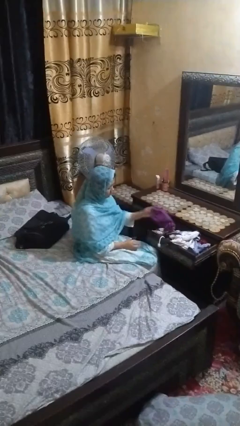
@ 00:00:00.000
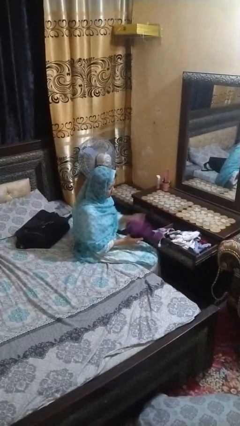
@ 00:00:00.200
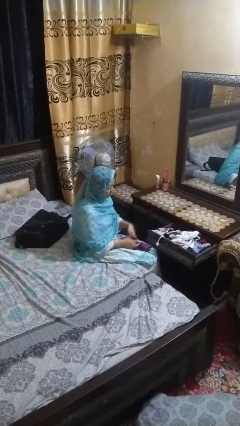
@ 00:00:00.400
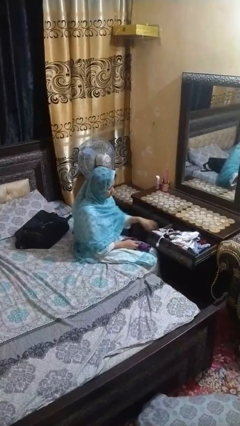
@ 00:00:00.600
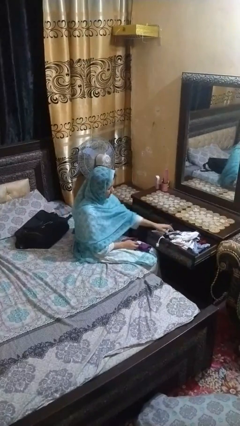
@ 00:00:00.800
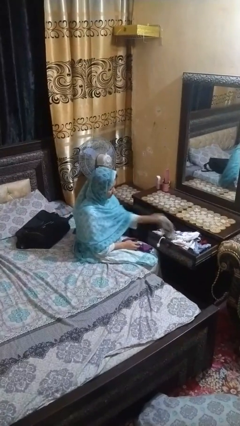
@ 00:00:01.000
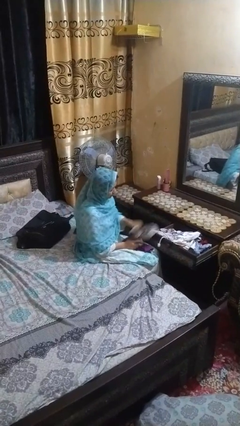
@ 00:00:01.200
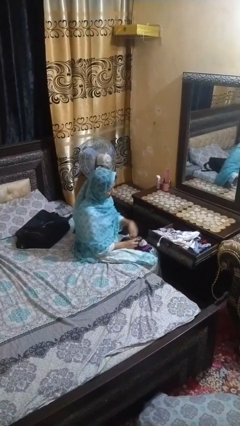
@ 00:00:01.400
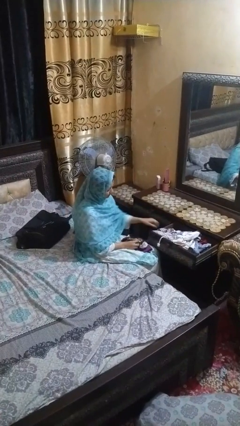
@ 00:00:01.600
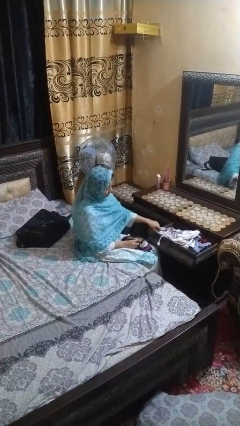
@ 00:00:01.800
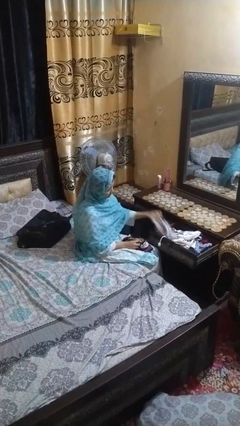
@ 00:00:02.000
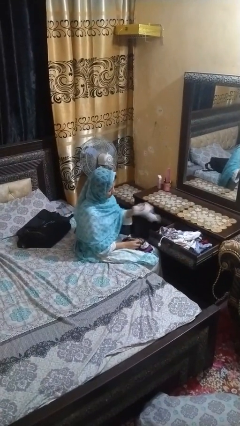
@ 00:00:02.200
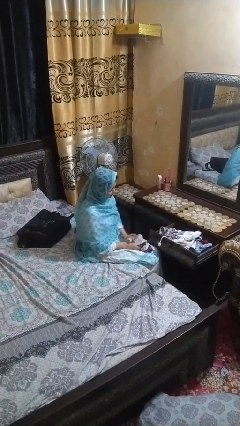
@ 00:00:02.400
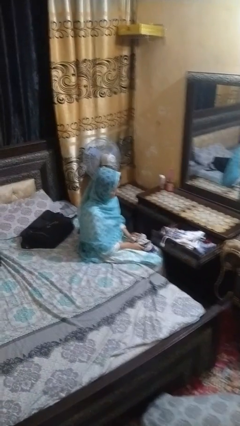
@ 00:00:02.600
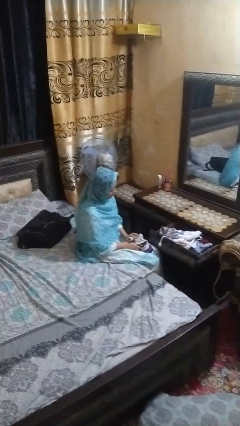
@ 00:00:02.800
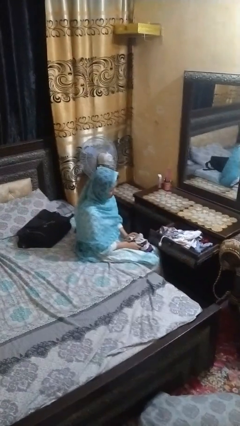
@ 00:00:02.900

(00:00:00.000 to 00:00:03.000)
person takes clothes from dresser

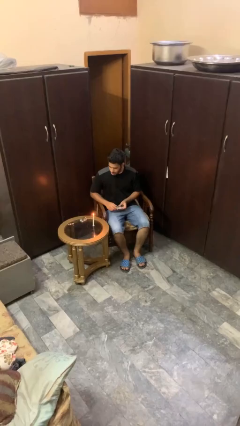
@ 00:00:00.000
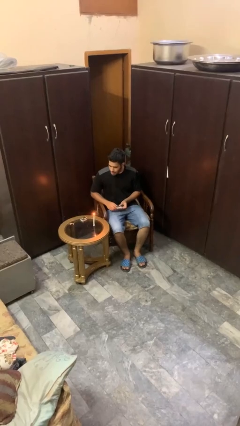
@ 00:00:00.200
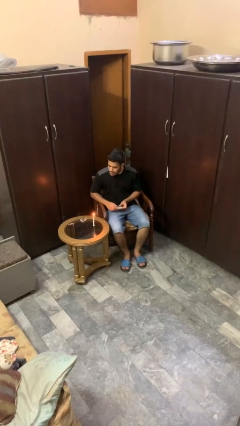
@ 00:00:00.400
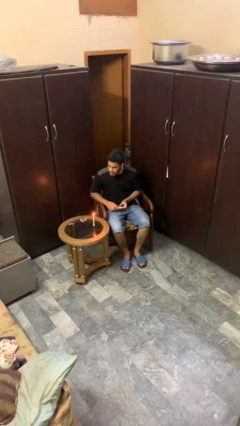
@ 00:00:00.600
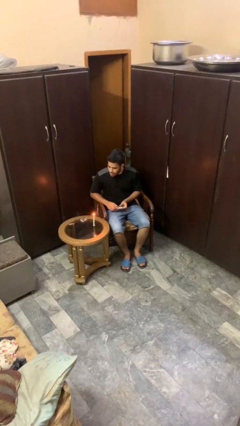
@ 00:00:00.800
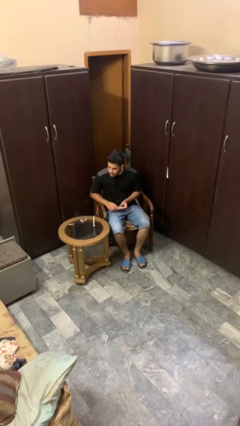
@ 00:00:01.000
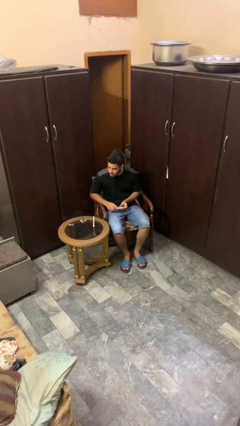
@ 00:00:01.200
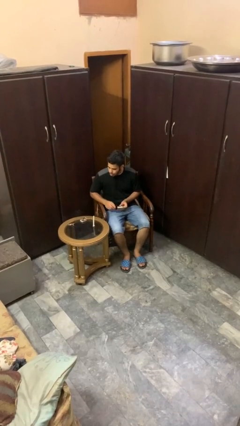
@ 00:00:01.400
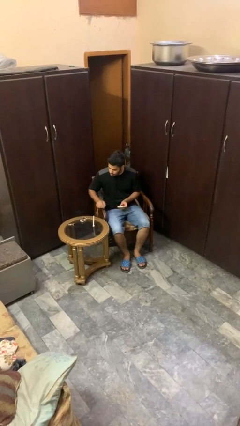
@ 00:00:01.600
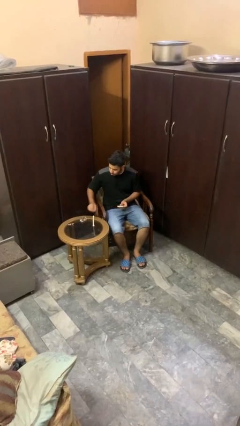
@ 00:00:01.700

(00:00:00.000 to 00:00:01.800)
person extinguishes candle
